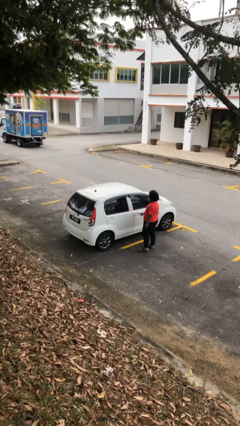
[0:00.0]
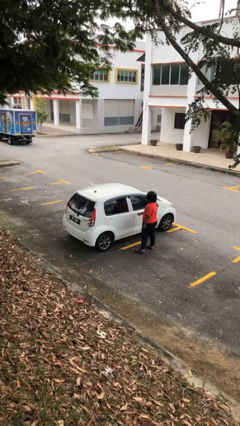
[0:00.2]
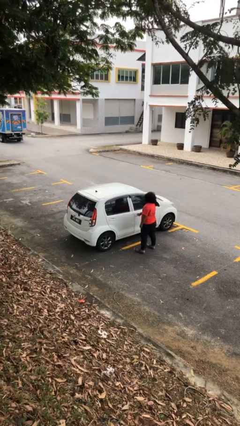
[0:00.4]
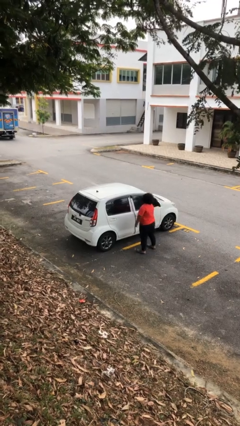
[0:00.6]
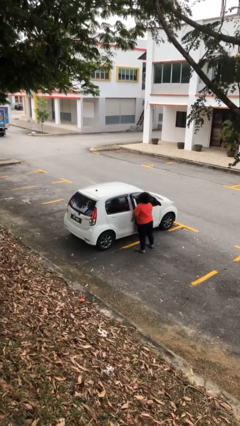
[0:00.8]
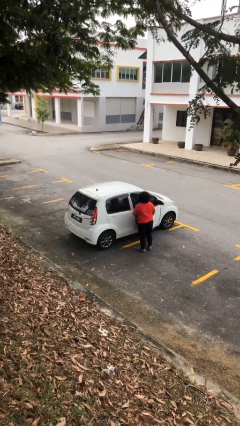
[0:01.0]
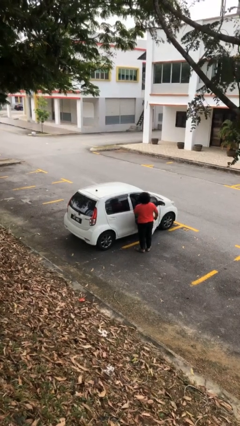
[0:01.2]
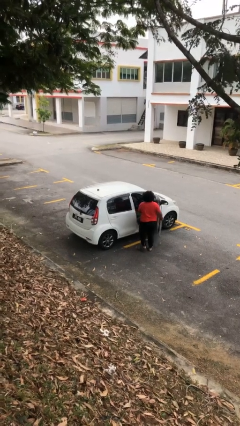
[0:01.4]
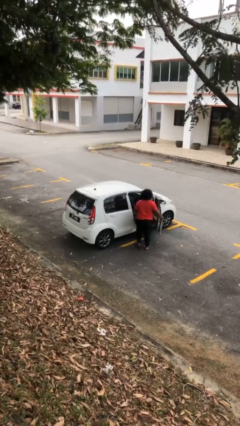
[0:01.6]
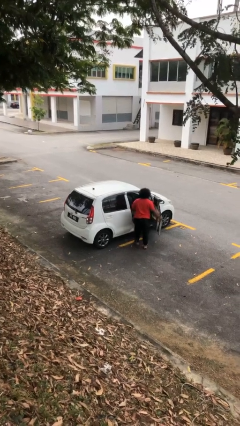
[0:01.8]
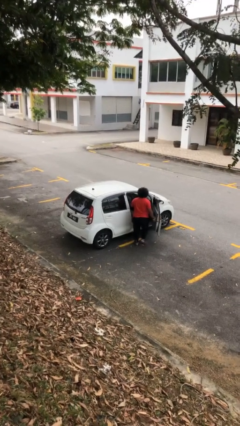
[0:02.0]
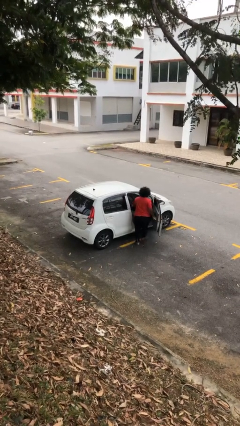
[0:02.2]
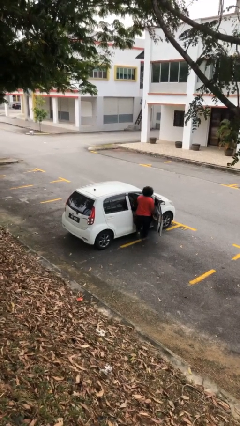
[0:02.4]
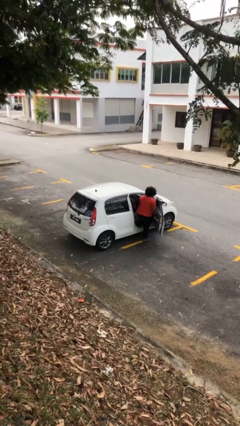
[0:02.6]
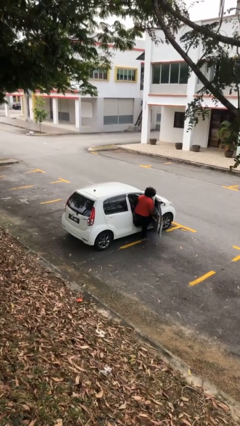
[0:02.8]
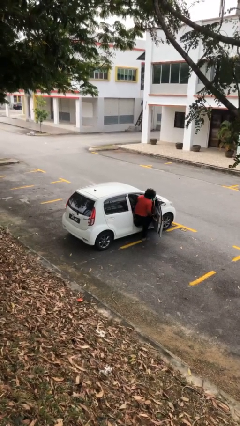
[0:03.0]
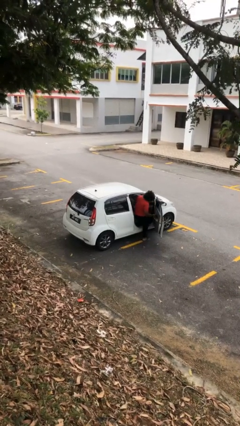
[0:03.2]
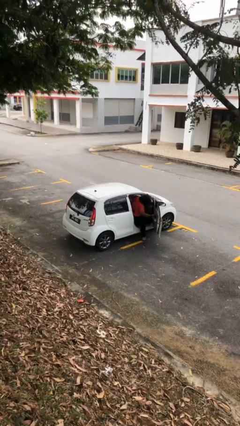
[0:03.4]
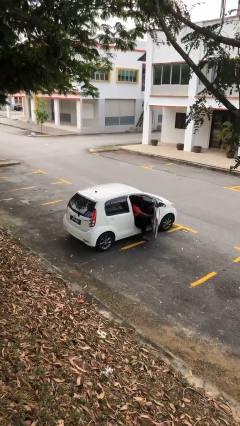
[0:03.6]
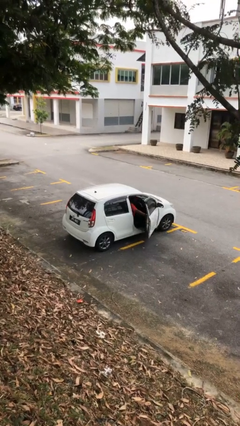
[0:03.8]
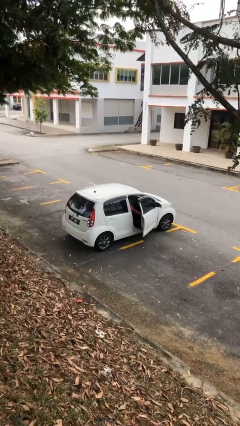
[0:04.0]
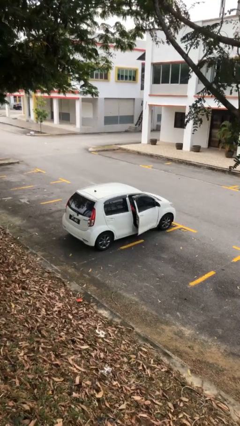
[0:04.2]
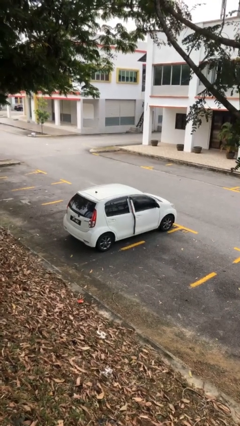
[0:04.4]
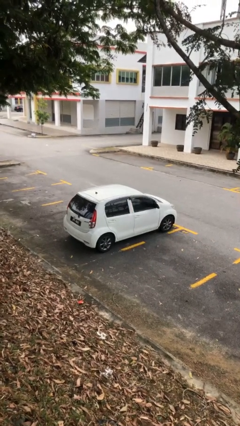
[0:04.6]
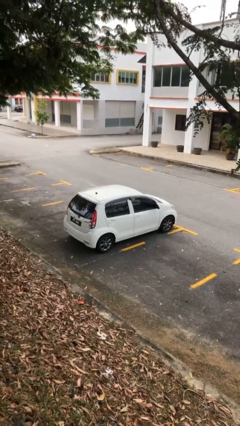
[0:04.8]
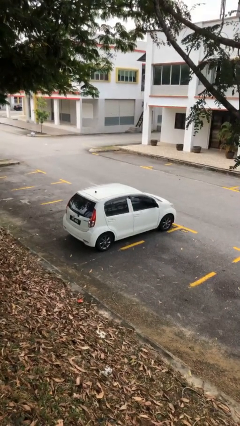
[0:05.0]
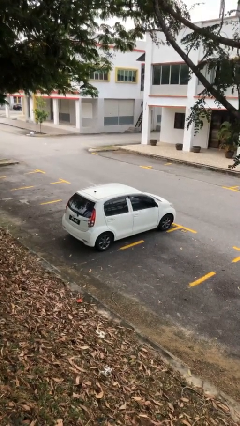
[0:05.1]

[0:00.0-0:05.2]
car picks up person

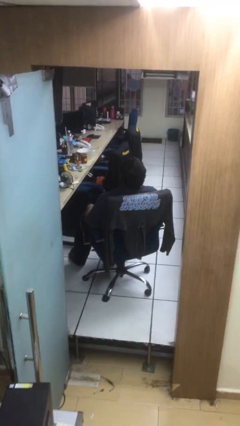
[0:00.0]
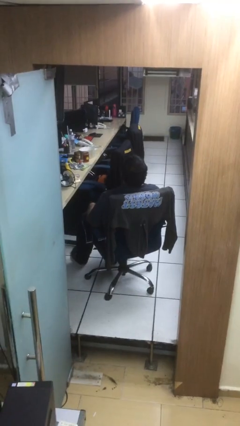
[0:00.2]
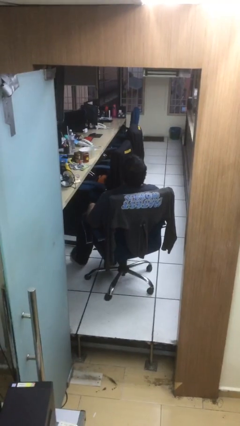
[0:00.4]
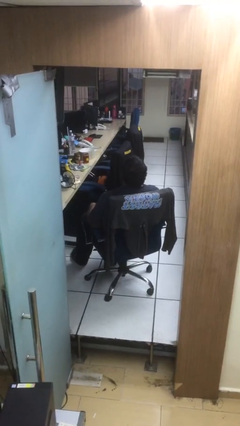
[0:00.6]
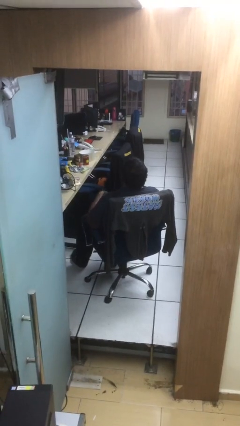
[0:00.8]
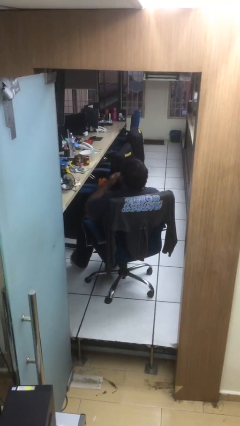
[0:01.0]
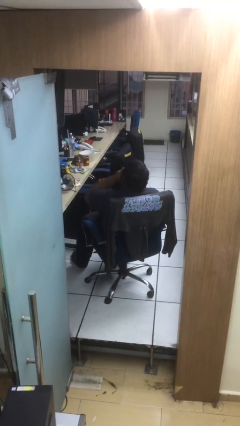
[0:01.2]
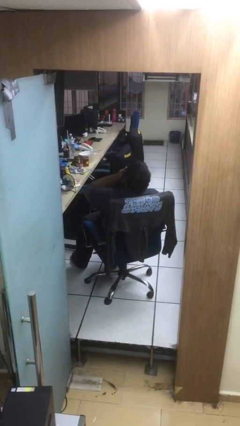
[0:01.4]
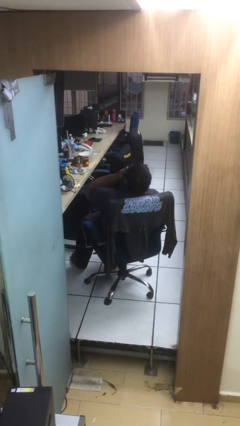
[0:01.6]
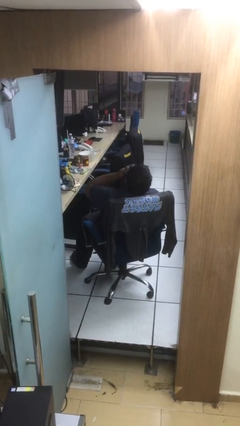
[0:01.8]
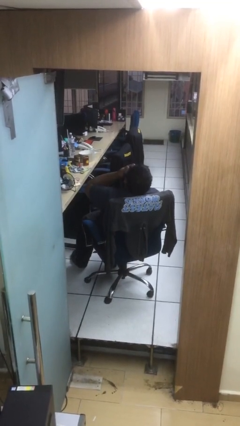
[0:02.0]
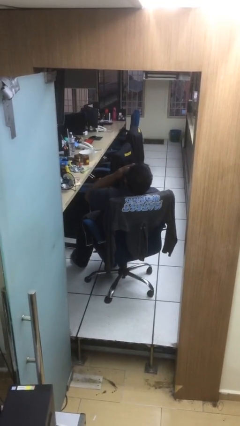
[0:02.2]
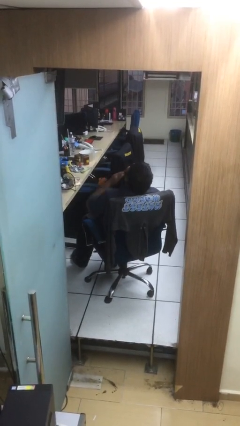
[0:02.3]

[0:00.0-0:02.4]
person yawns

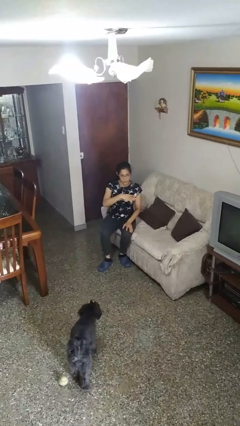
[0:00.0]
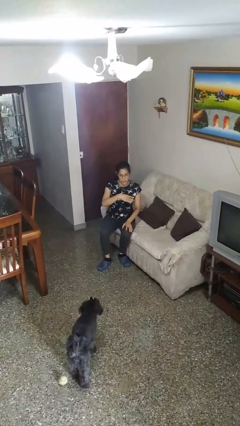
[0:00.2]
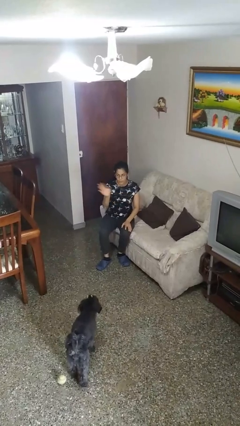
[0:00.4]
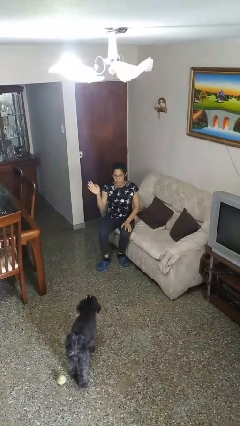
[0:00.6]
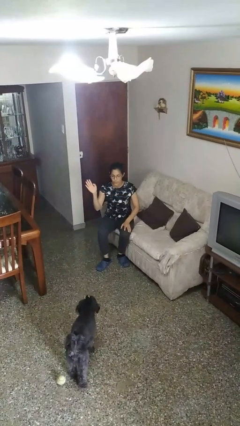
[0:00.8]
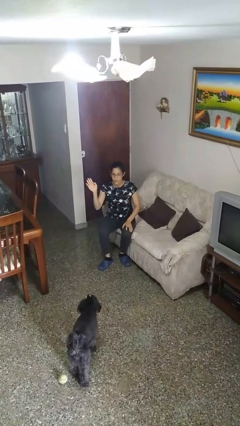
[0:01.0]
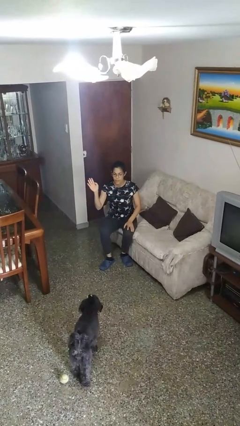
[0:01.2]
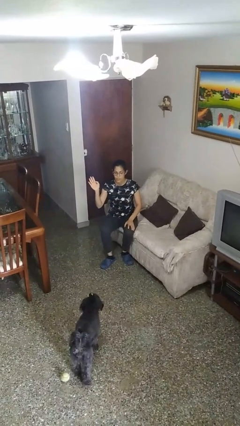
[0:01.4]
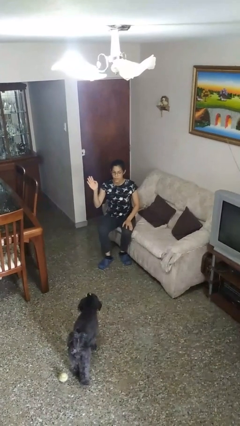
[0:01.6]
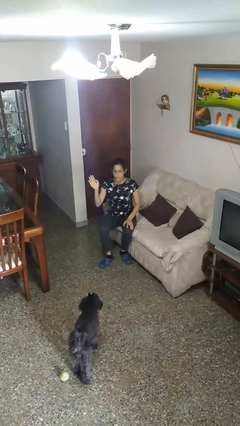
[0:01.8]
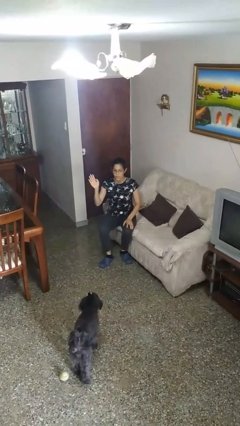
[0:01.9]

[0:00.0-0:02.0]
person gestures swipe right

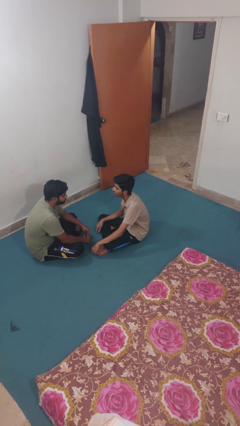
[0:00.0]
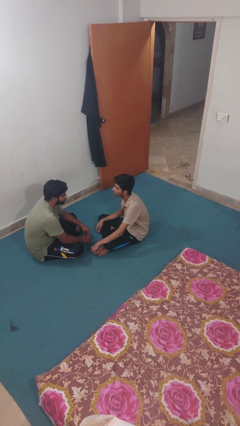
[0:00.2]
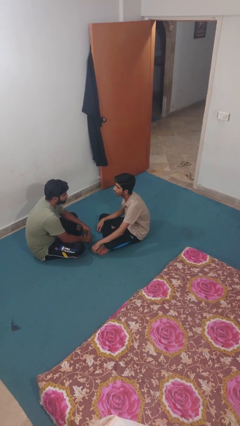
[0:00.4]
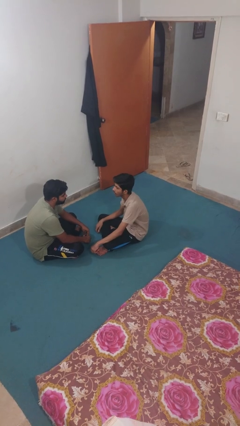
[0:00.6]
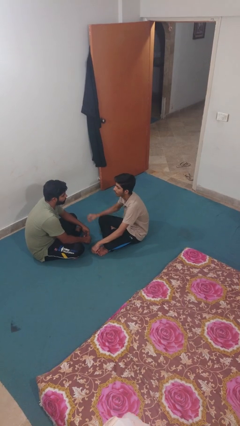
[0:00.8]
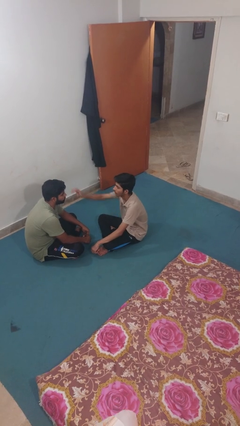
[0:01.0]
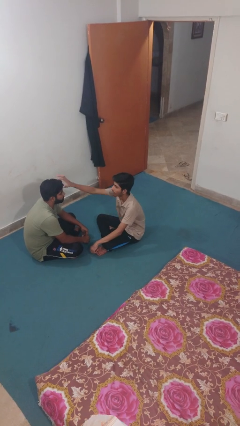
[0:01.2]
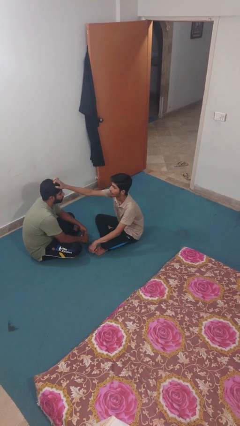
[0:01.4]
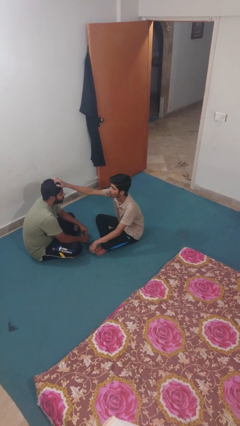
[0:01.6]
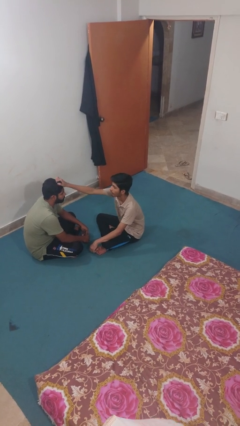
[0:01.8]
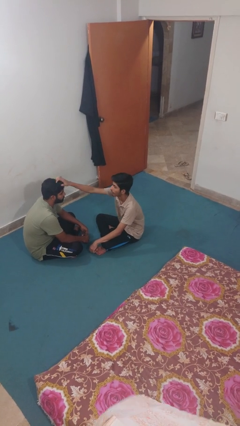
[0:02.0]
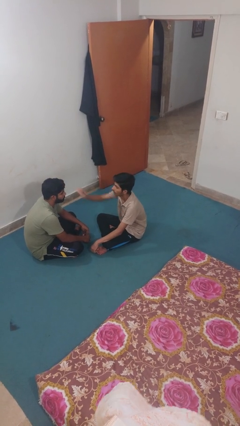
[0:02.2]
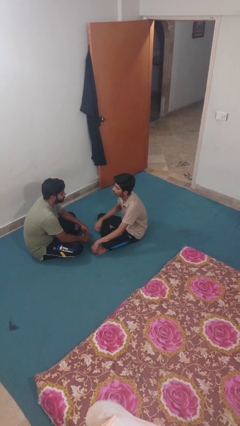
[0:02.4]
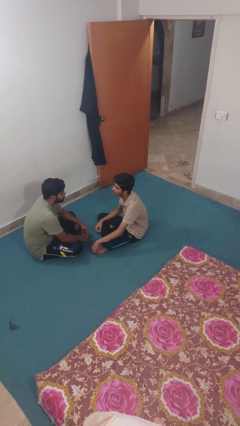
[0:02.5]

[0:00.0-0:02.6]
person grabs person by hair

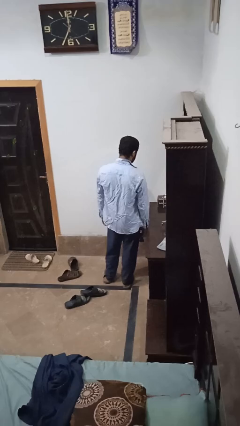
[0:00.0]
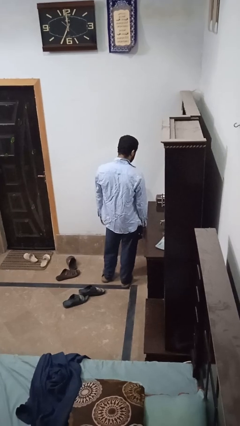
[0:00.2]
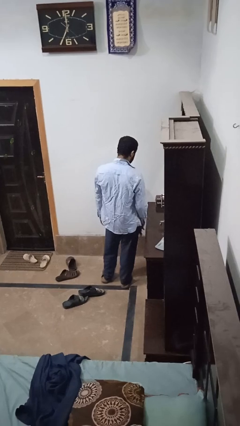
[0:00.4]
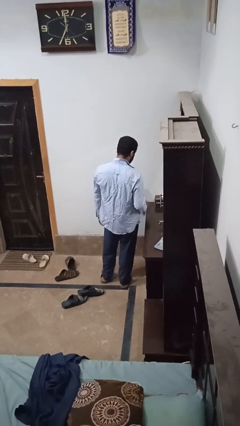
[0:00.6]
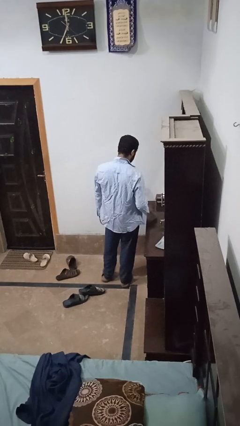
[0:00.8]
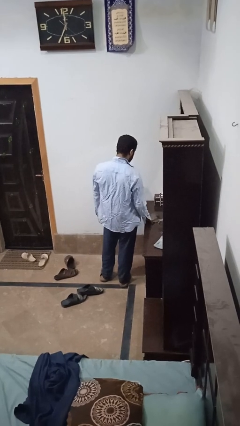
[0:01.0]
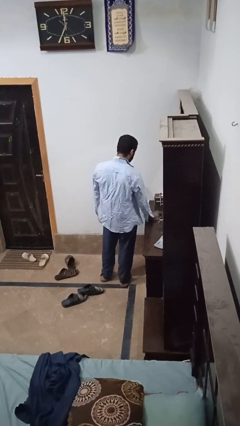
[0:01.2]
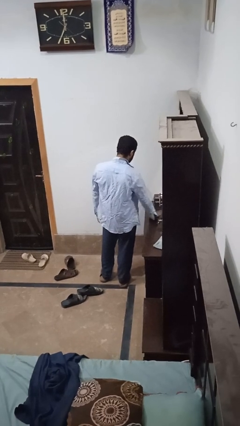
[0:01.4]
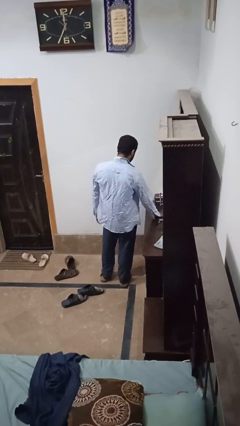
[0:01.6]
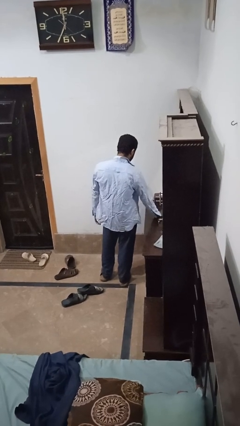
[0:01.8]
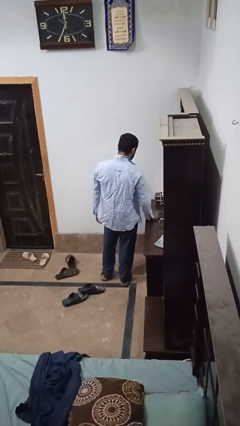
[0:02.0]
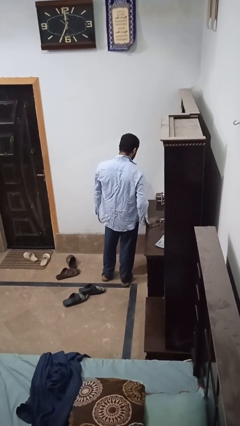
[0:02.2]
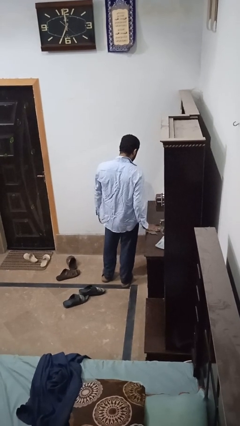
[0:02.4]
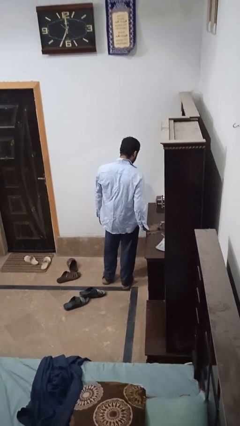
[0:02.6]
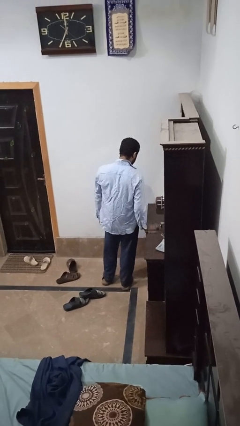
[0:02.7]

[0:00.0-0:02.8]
person cleans table with rag

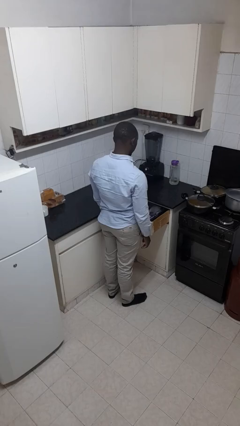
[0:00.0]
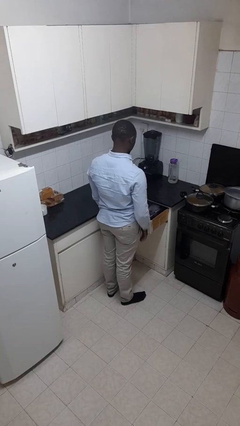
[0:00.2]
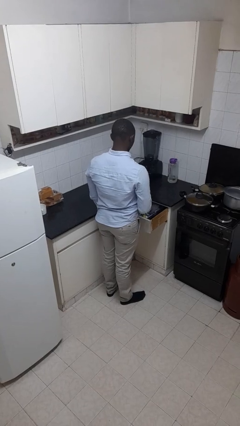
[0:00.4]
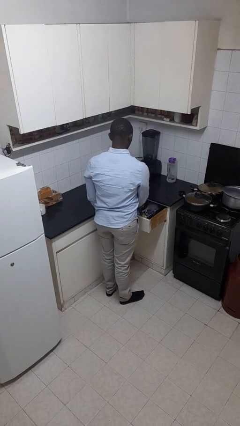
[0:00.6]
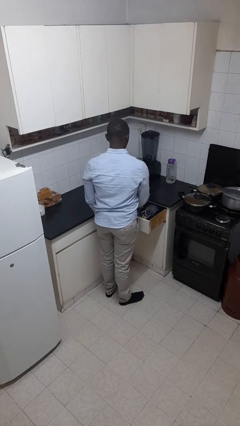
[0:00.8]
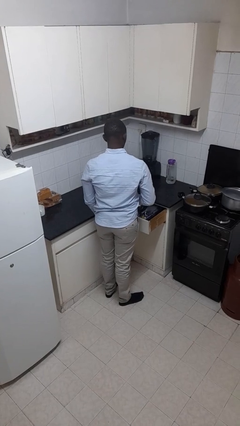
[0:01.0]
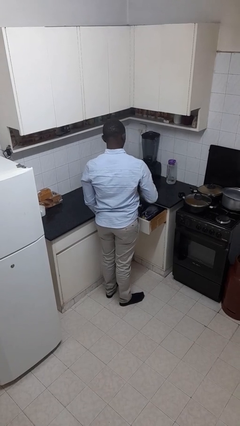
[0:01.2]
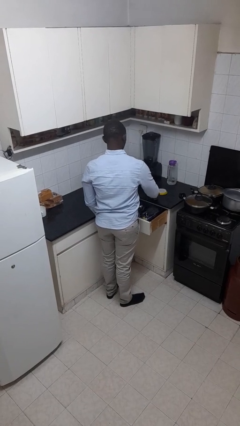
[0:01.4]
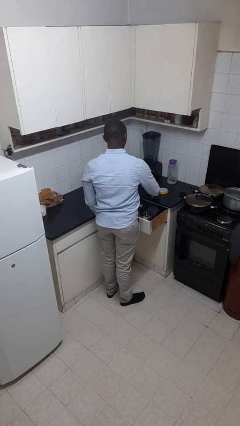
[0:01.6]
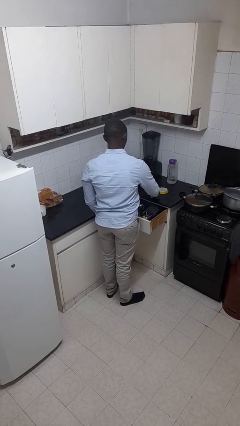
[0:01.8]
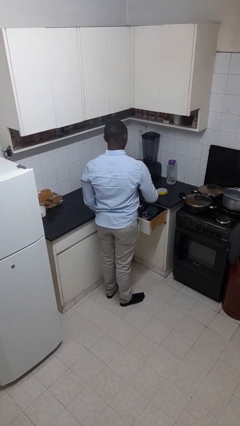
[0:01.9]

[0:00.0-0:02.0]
person takes object from kitchen drawer
